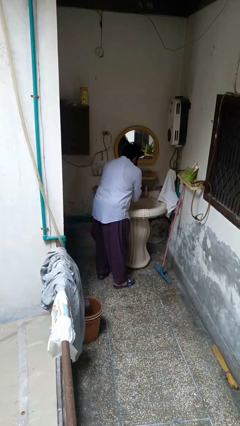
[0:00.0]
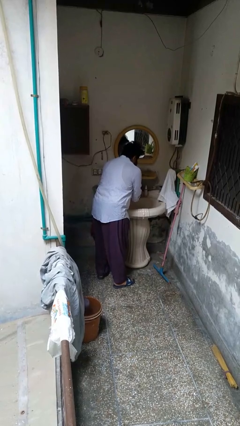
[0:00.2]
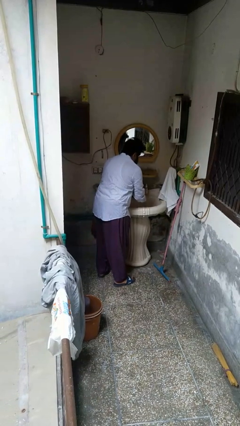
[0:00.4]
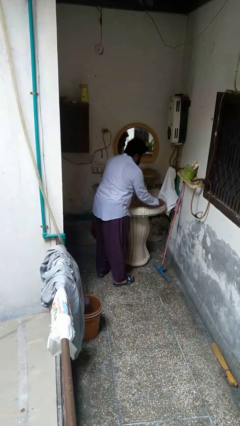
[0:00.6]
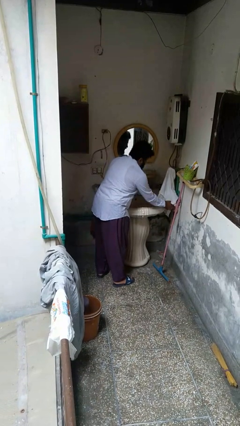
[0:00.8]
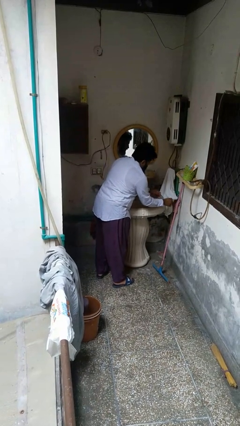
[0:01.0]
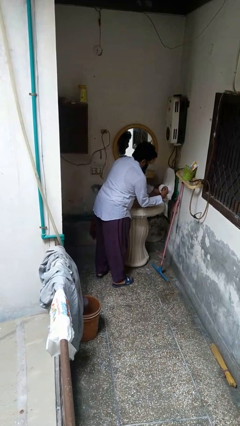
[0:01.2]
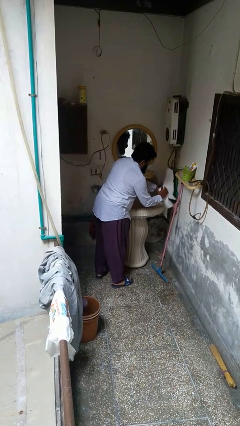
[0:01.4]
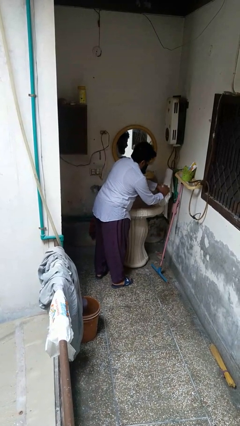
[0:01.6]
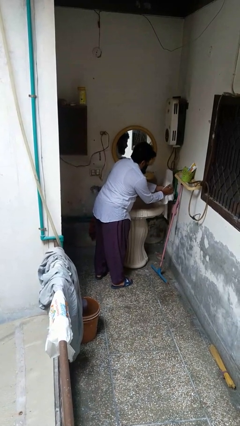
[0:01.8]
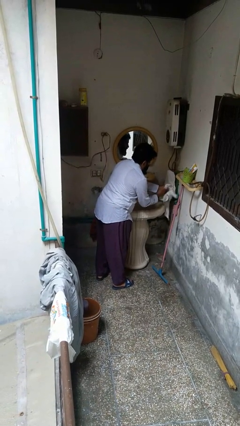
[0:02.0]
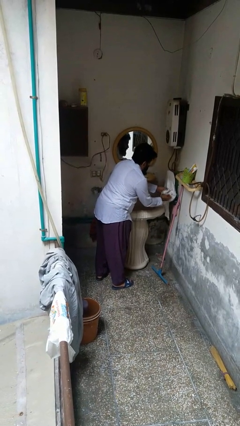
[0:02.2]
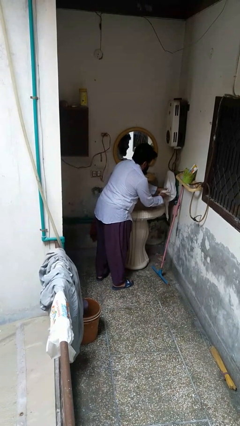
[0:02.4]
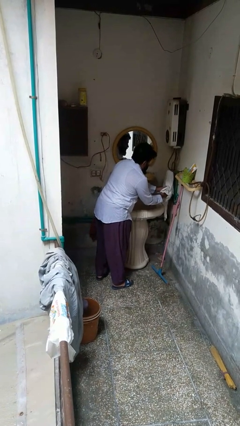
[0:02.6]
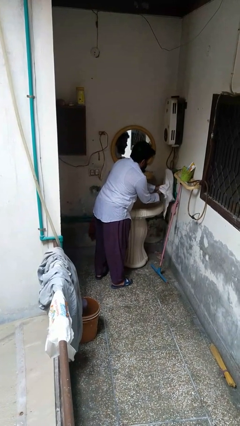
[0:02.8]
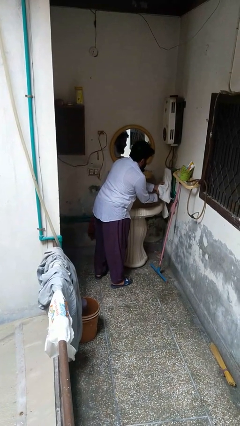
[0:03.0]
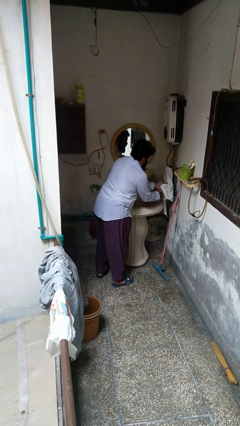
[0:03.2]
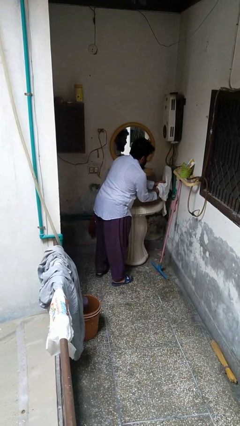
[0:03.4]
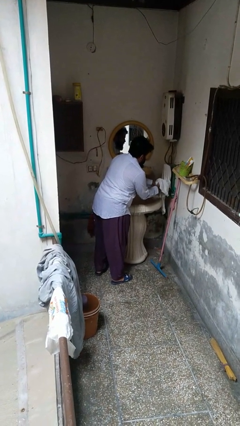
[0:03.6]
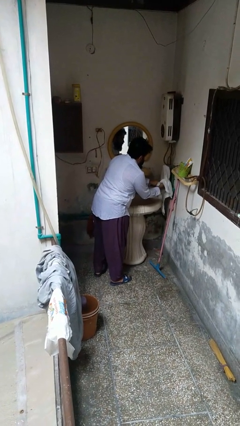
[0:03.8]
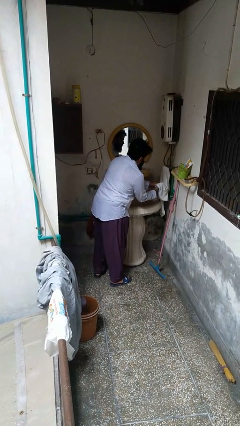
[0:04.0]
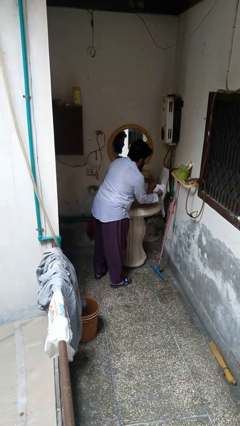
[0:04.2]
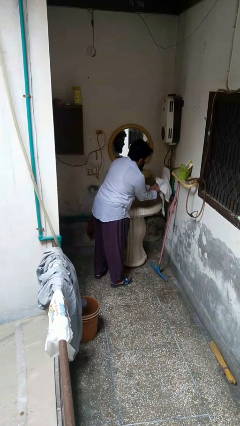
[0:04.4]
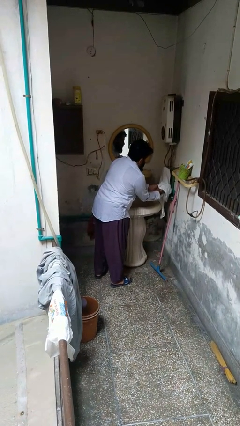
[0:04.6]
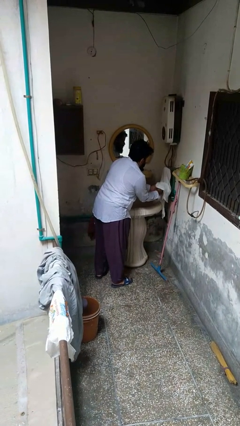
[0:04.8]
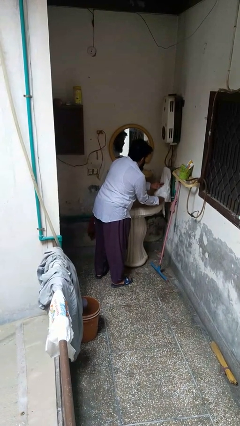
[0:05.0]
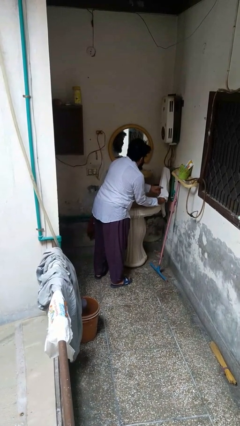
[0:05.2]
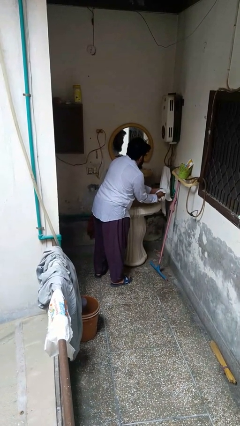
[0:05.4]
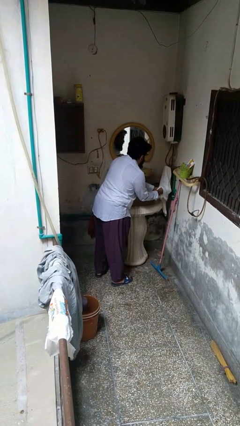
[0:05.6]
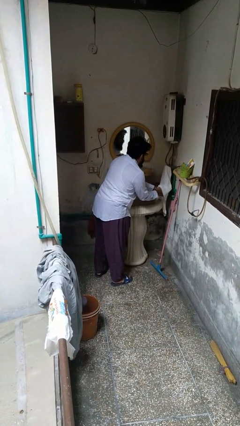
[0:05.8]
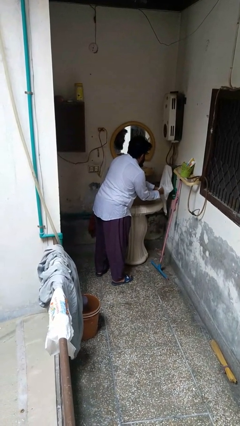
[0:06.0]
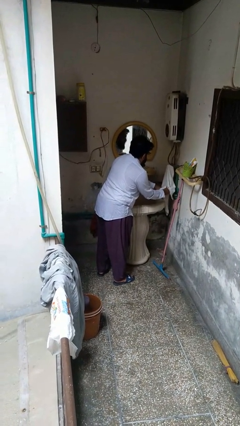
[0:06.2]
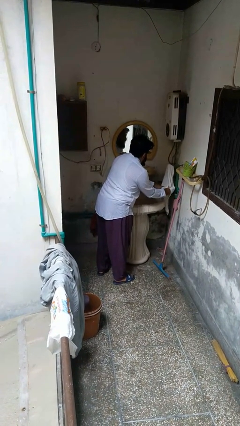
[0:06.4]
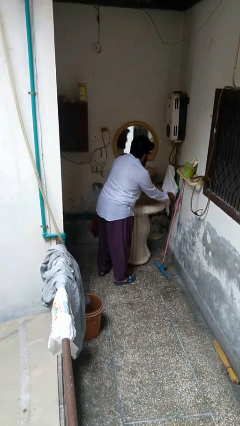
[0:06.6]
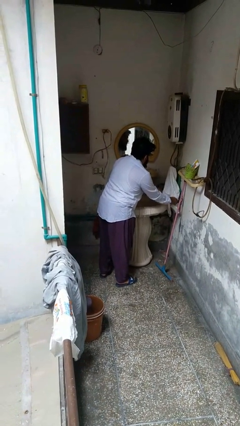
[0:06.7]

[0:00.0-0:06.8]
person dries hands with towel

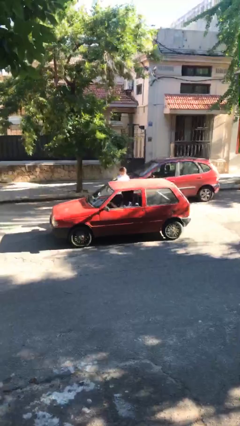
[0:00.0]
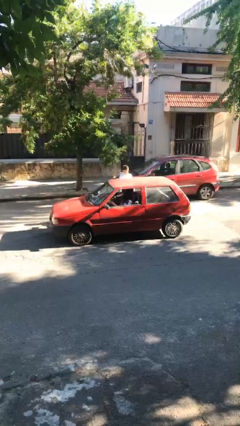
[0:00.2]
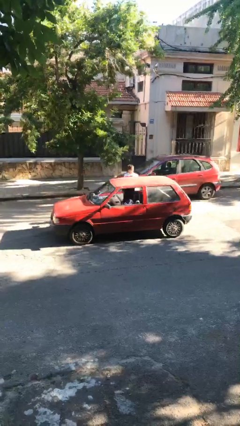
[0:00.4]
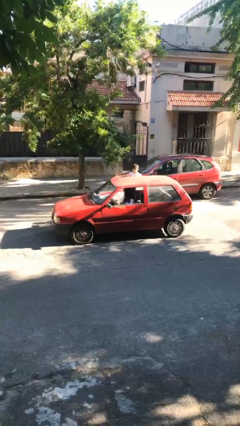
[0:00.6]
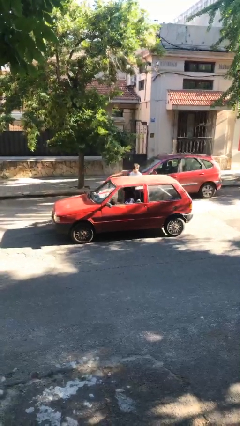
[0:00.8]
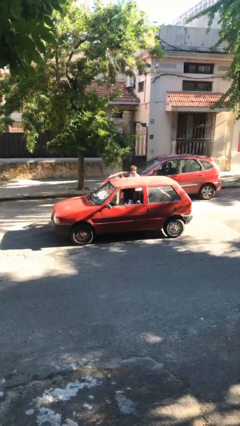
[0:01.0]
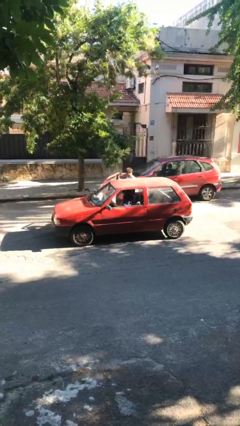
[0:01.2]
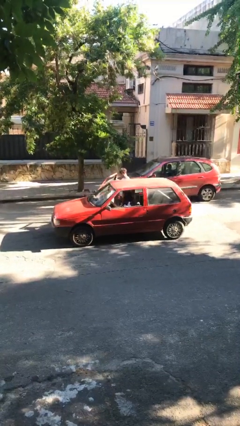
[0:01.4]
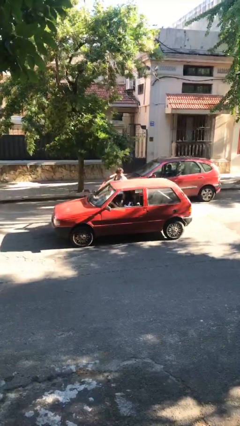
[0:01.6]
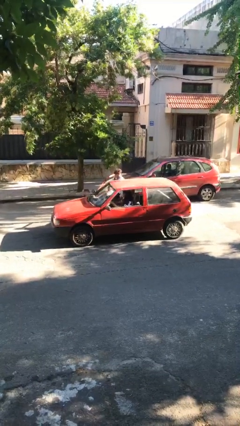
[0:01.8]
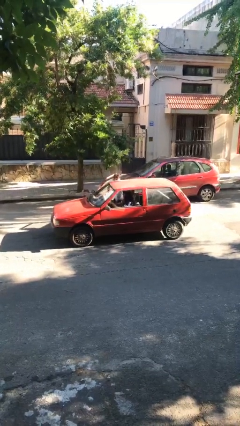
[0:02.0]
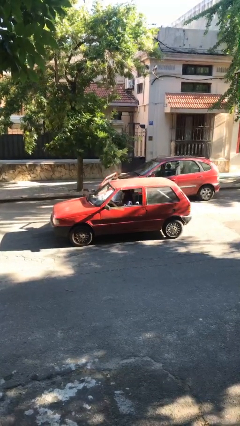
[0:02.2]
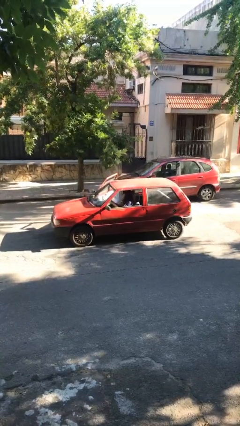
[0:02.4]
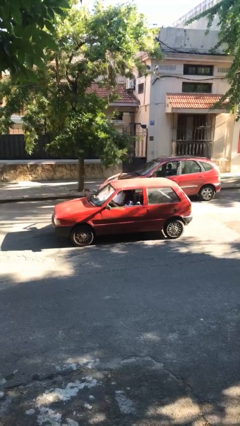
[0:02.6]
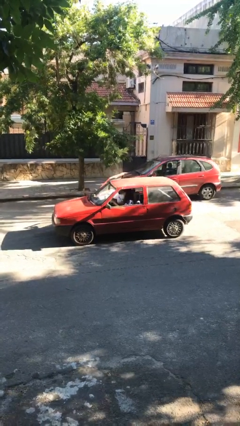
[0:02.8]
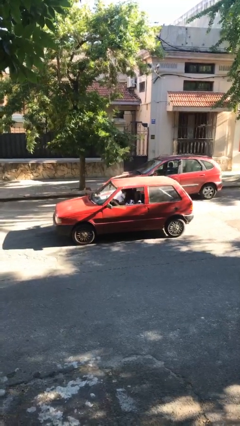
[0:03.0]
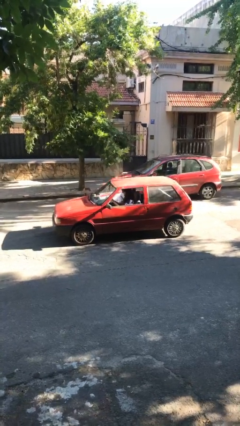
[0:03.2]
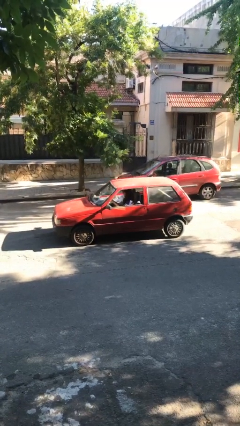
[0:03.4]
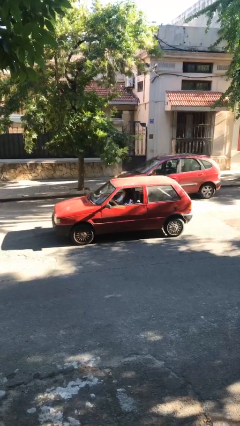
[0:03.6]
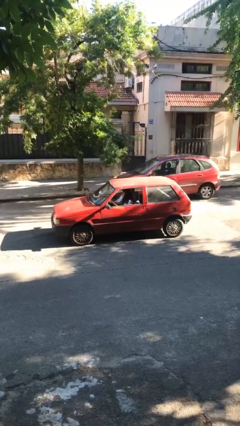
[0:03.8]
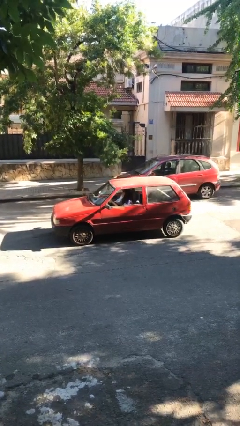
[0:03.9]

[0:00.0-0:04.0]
car picks up person

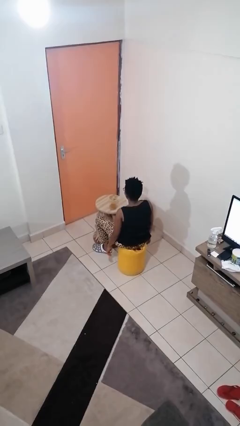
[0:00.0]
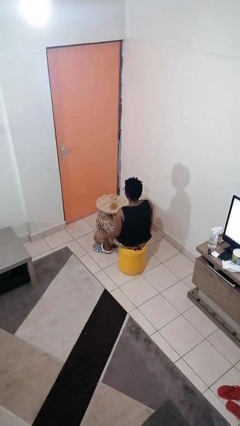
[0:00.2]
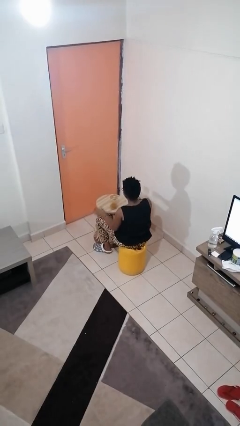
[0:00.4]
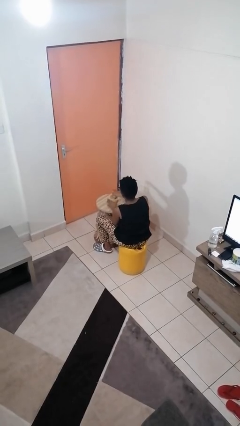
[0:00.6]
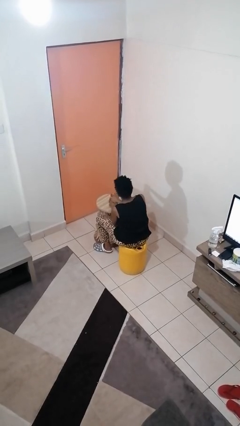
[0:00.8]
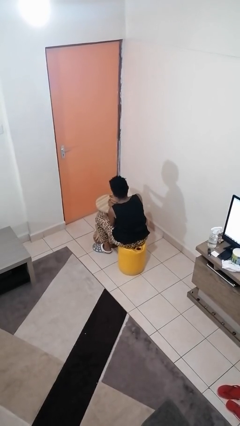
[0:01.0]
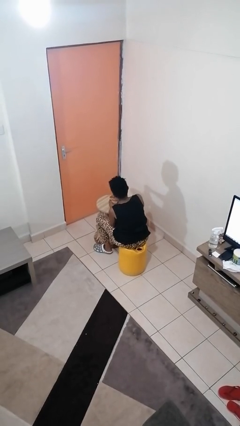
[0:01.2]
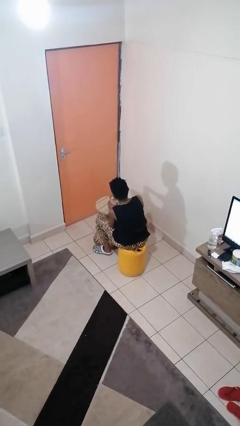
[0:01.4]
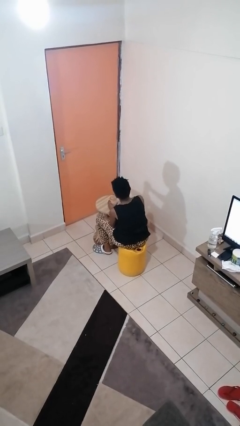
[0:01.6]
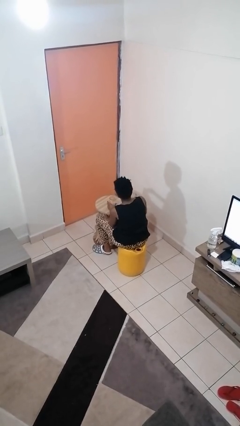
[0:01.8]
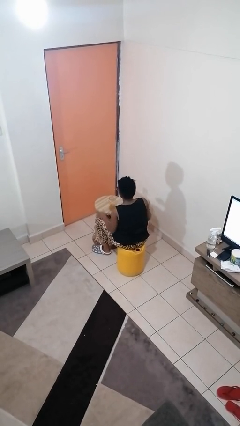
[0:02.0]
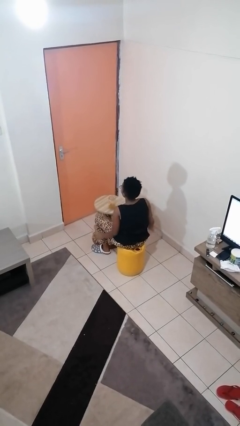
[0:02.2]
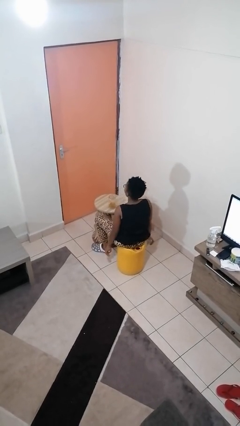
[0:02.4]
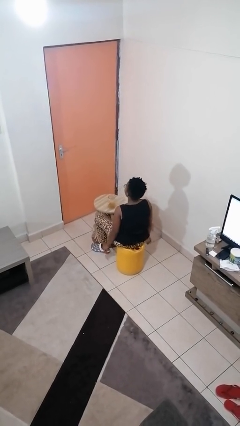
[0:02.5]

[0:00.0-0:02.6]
person opens jar

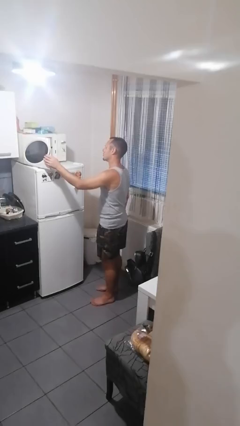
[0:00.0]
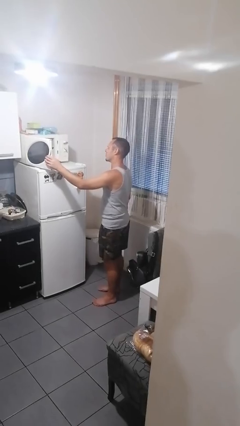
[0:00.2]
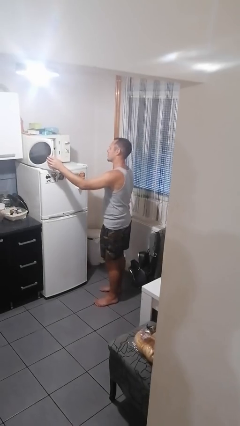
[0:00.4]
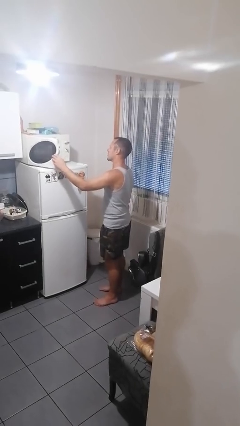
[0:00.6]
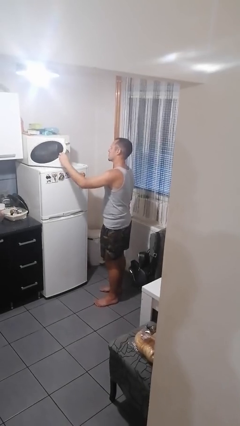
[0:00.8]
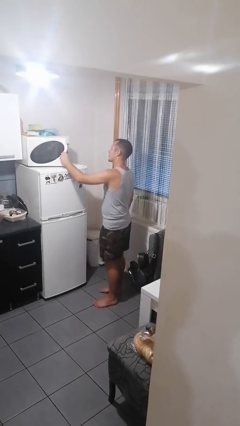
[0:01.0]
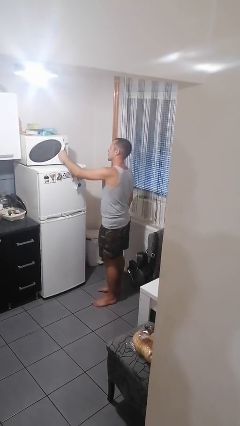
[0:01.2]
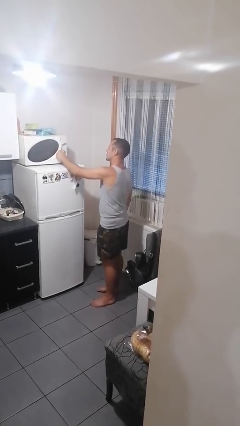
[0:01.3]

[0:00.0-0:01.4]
person closes microwave

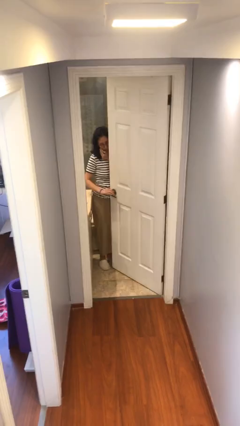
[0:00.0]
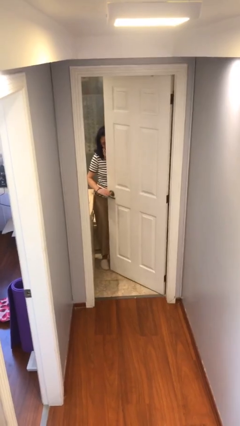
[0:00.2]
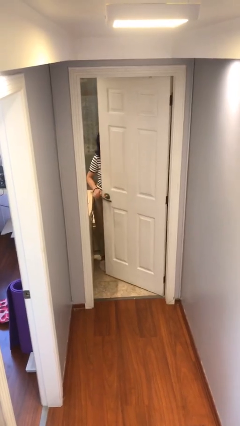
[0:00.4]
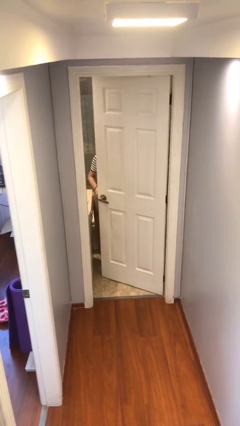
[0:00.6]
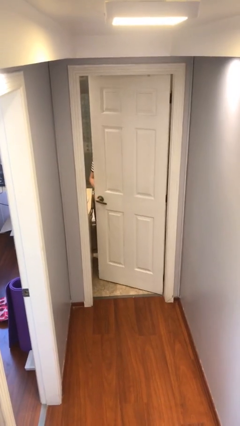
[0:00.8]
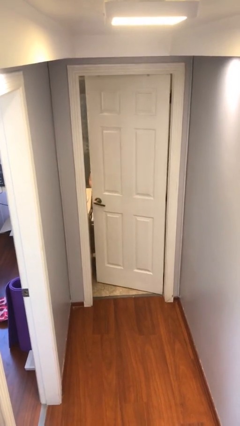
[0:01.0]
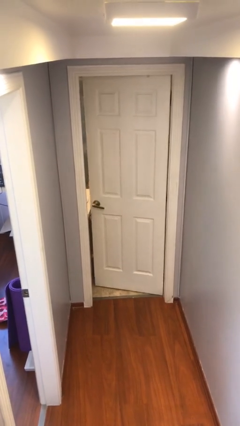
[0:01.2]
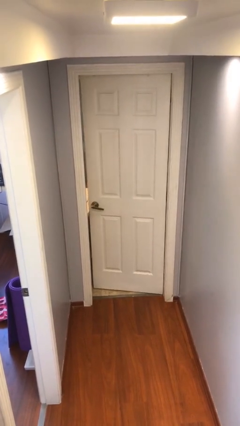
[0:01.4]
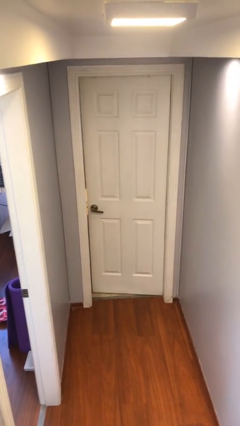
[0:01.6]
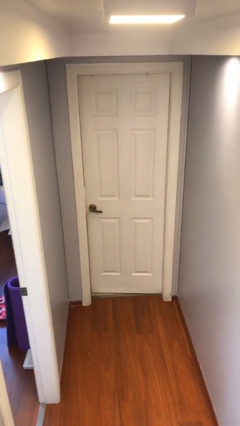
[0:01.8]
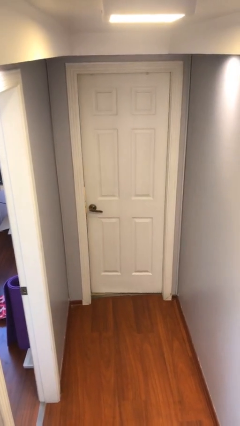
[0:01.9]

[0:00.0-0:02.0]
person closes facility door

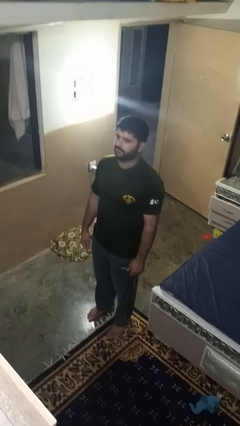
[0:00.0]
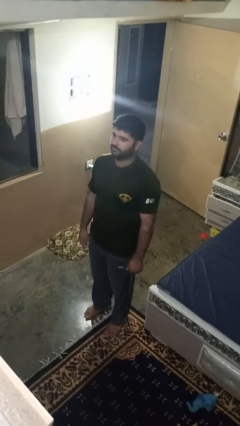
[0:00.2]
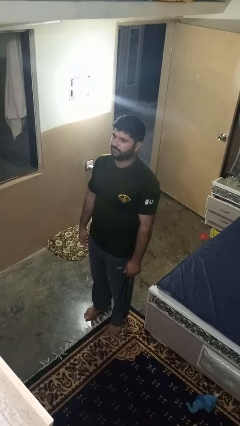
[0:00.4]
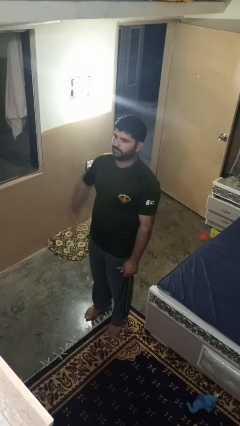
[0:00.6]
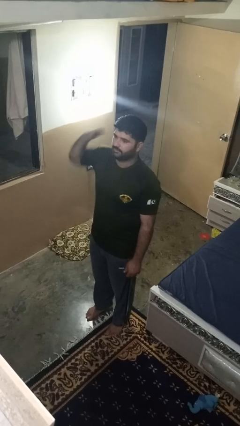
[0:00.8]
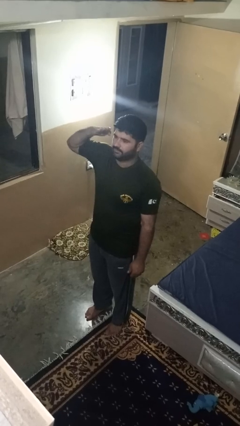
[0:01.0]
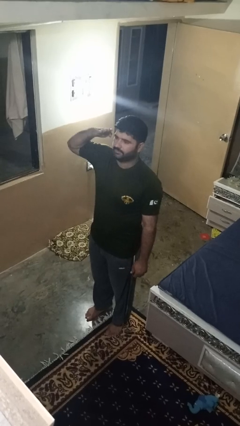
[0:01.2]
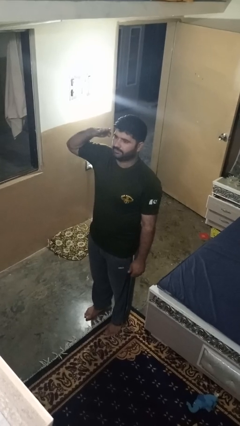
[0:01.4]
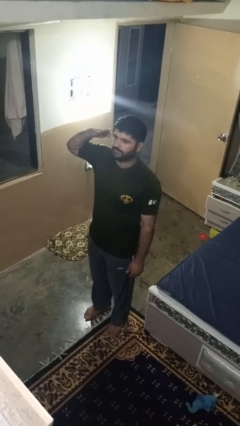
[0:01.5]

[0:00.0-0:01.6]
person salutes
